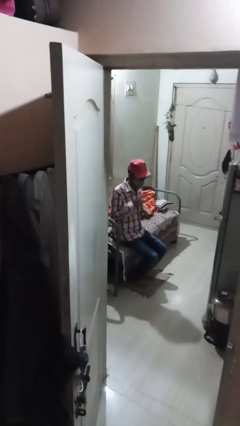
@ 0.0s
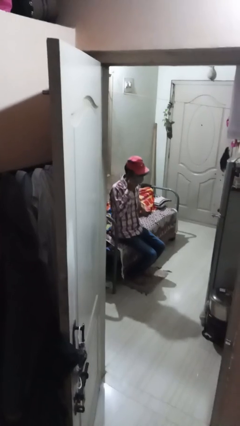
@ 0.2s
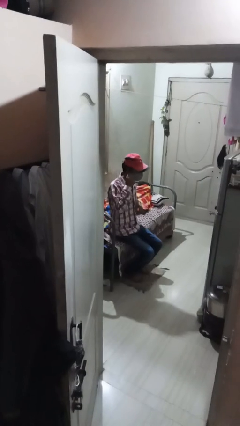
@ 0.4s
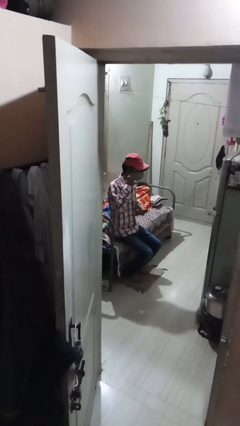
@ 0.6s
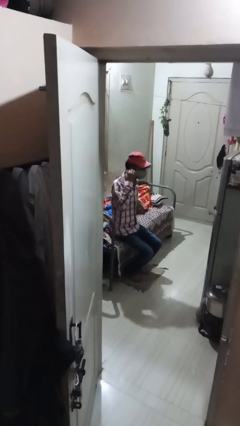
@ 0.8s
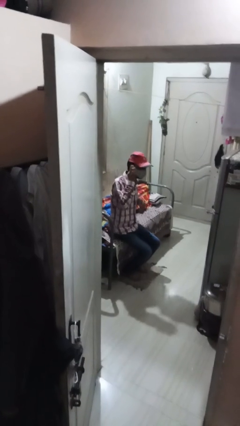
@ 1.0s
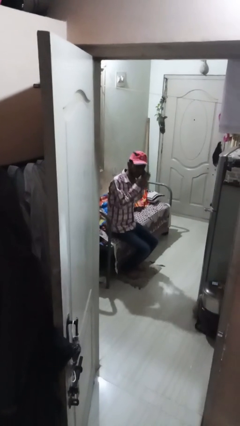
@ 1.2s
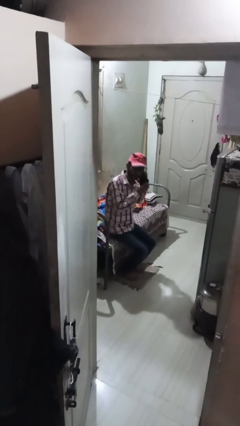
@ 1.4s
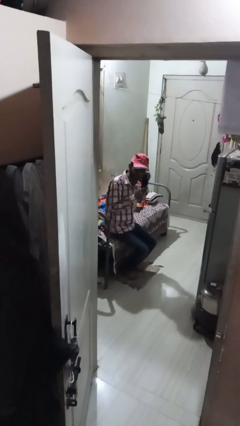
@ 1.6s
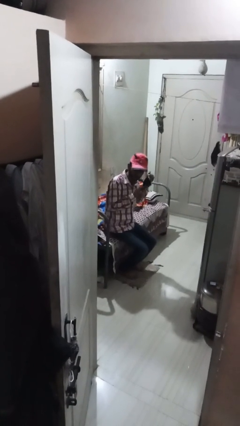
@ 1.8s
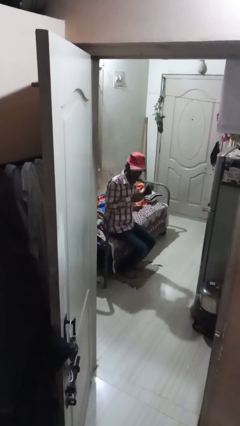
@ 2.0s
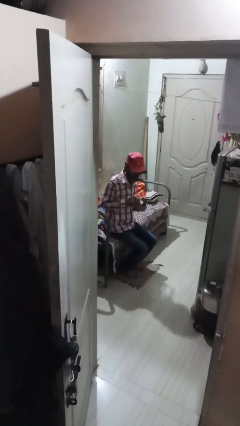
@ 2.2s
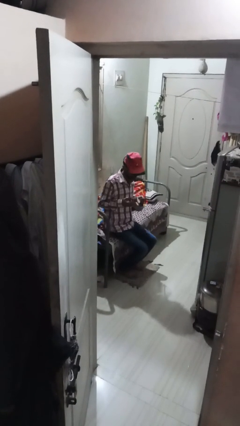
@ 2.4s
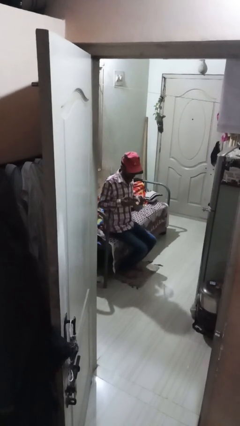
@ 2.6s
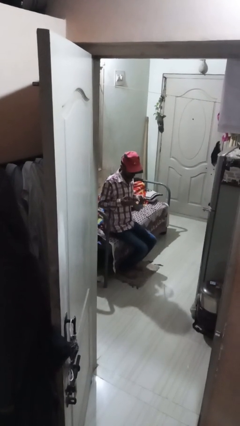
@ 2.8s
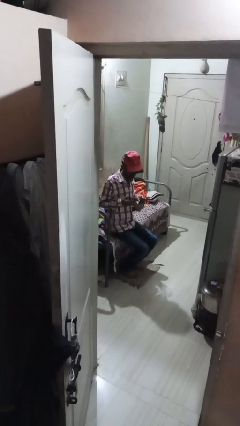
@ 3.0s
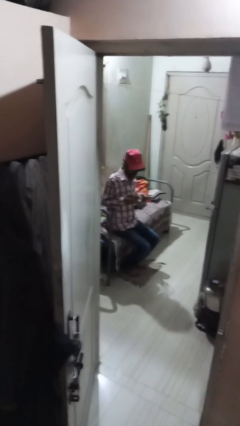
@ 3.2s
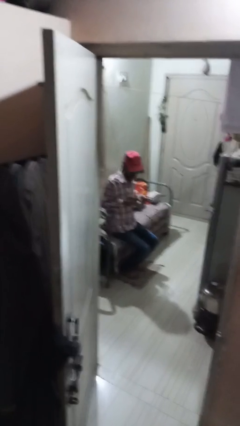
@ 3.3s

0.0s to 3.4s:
person takes off facemask

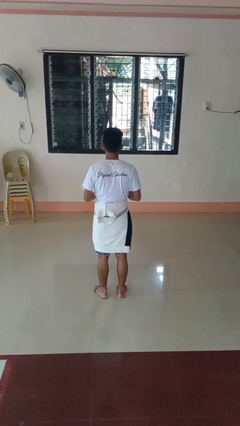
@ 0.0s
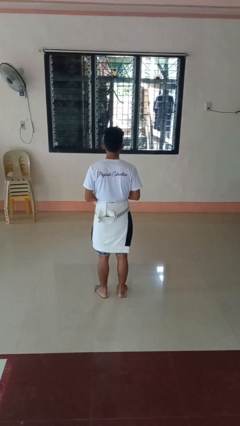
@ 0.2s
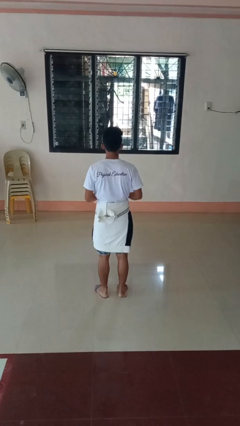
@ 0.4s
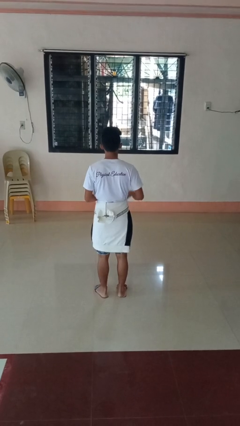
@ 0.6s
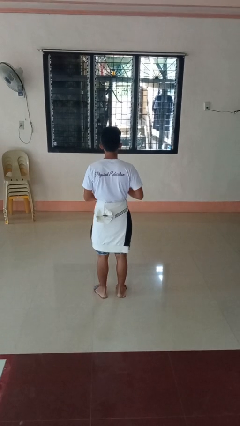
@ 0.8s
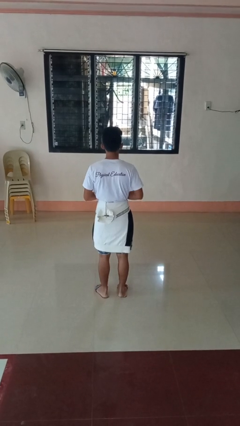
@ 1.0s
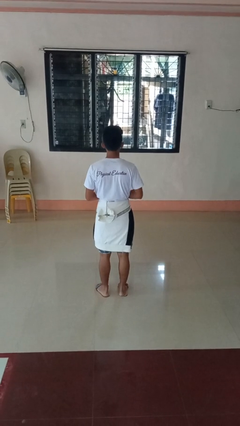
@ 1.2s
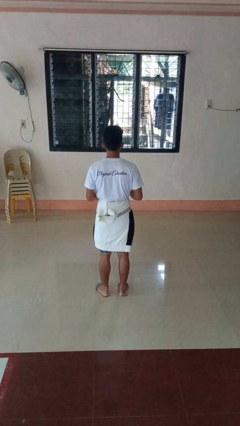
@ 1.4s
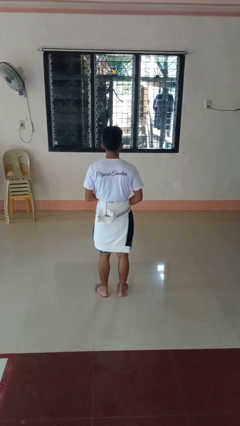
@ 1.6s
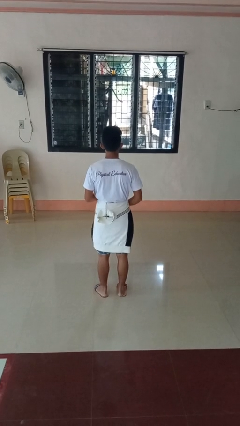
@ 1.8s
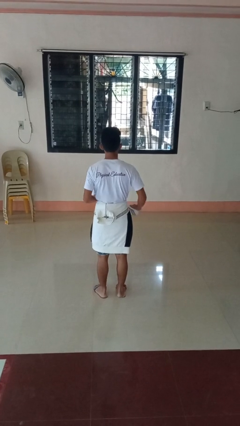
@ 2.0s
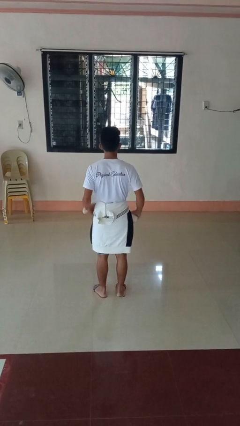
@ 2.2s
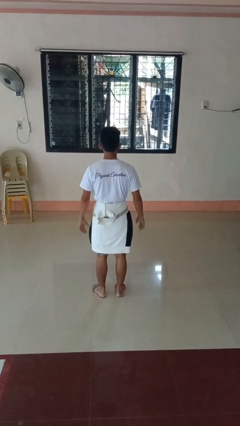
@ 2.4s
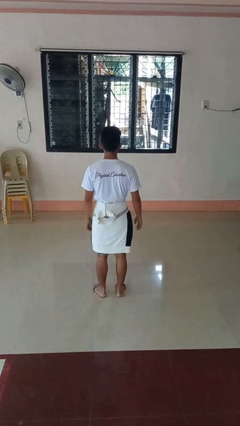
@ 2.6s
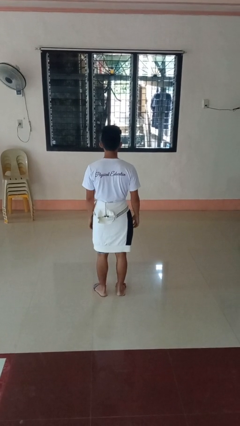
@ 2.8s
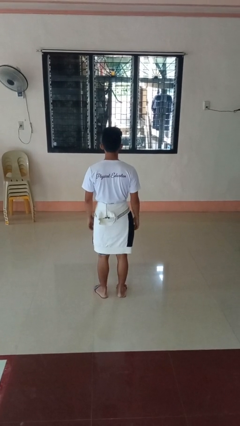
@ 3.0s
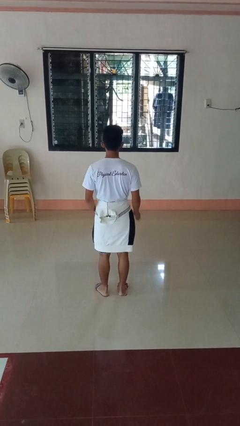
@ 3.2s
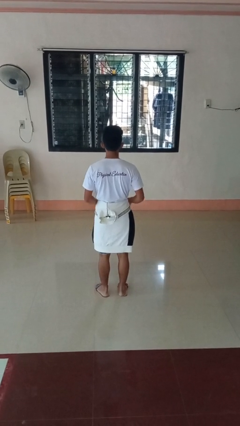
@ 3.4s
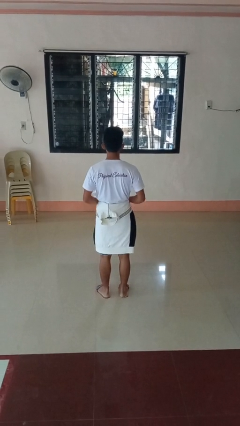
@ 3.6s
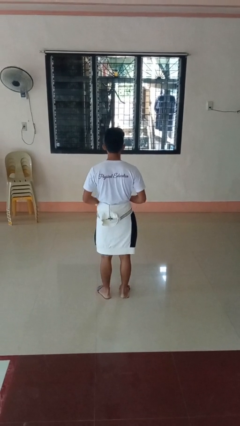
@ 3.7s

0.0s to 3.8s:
person ties jacket around waist

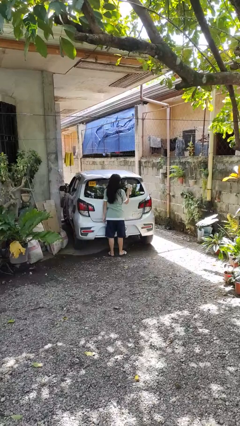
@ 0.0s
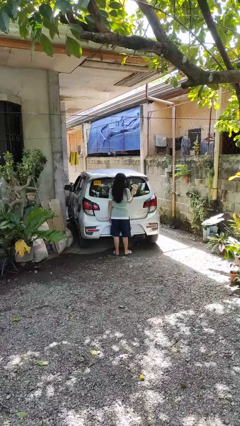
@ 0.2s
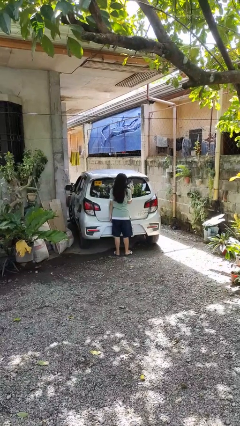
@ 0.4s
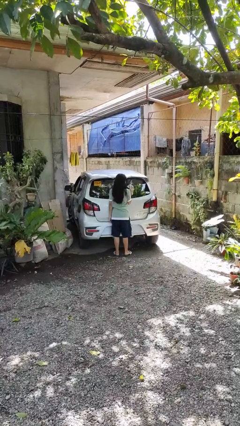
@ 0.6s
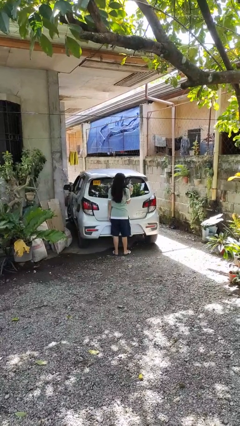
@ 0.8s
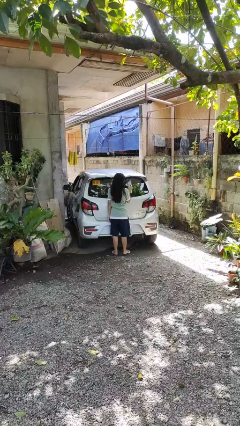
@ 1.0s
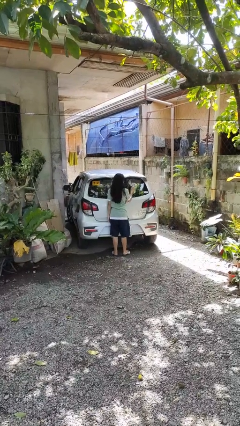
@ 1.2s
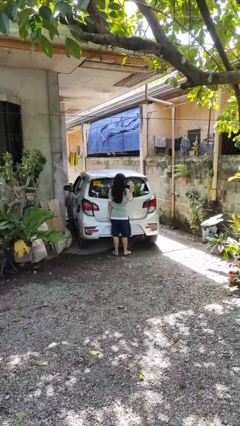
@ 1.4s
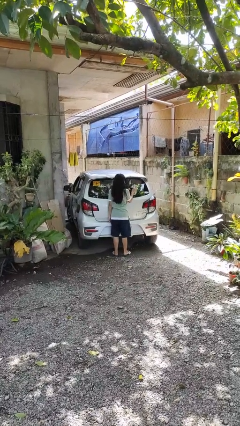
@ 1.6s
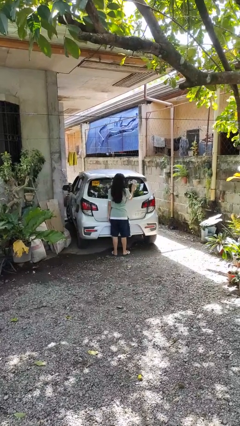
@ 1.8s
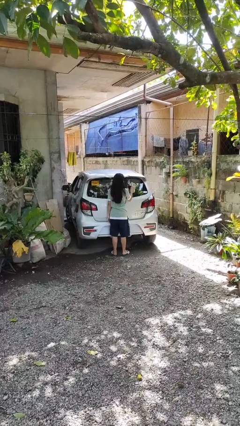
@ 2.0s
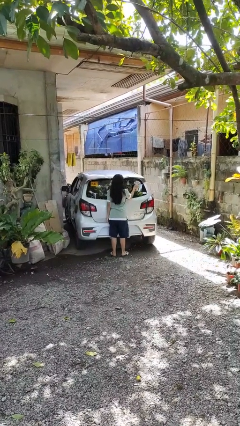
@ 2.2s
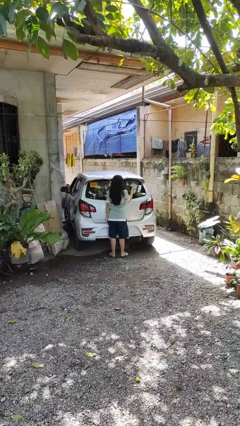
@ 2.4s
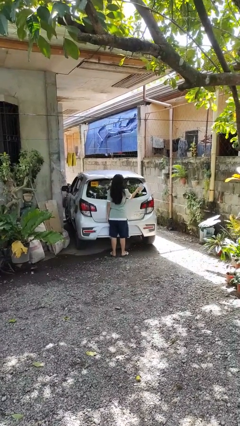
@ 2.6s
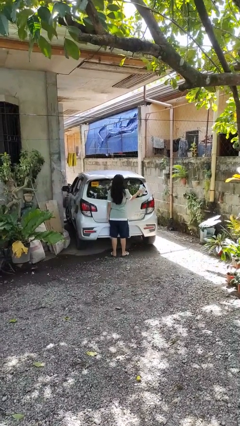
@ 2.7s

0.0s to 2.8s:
person polishes car with rag

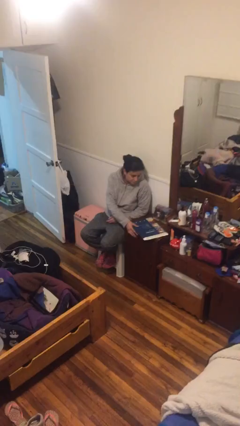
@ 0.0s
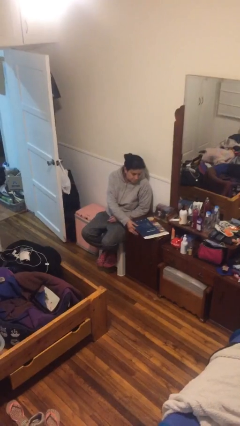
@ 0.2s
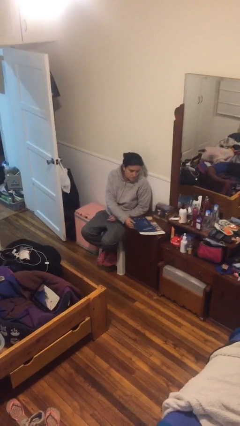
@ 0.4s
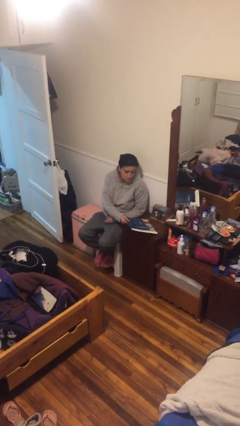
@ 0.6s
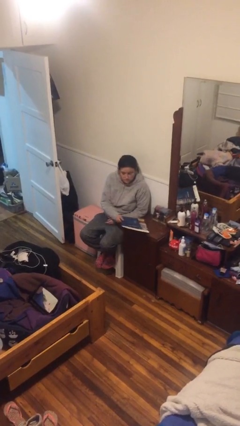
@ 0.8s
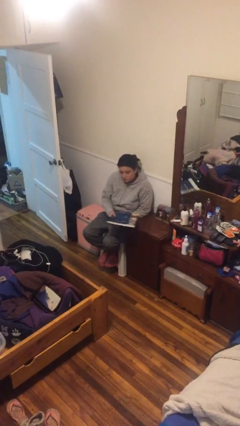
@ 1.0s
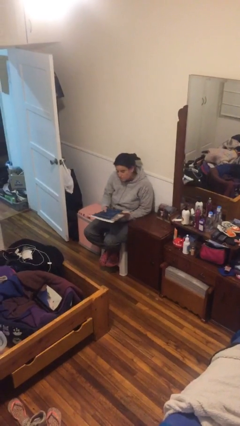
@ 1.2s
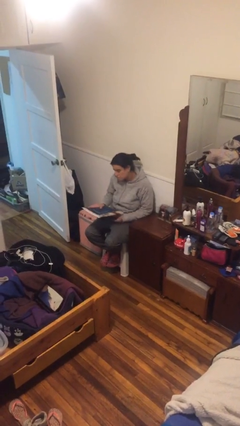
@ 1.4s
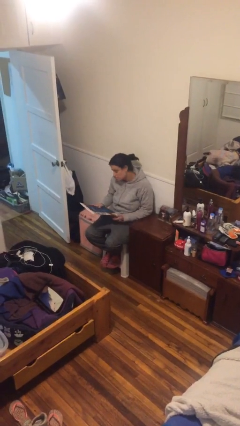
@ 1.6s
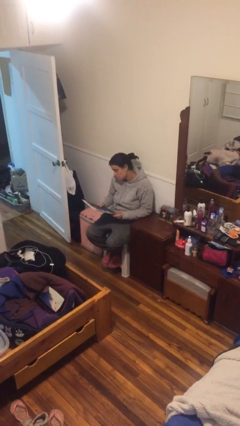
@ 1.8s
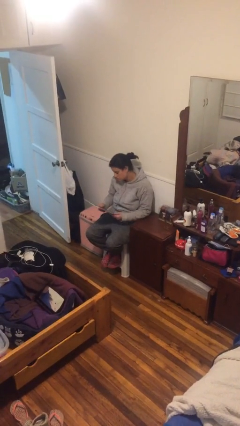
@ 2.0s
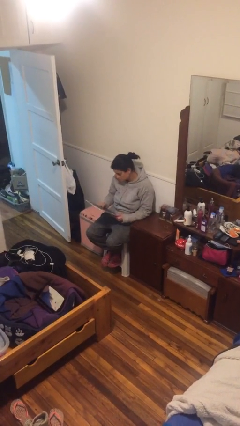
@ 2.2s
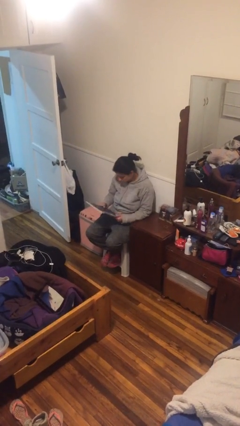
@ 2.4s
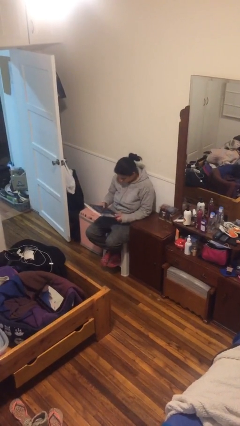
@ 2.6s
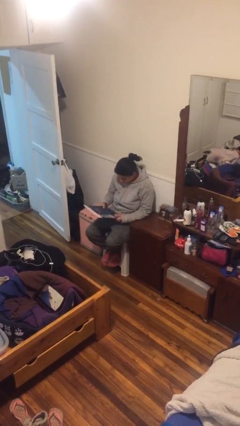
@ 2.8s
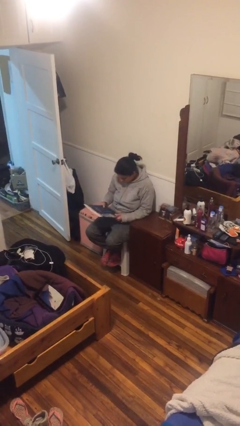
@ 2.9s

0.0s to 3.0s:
person picks up object from table

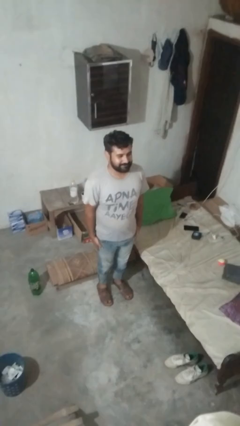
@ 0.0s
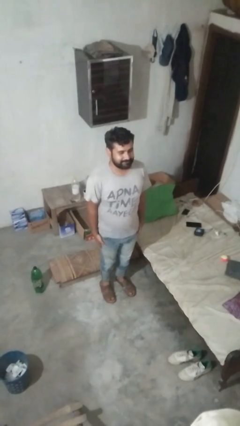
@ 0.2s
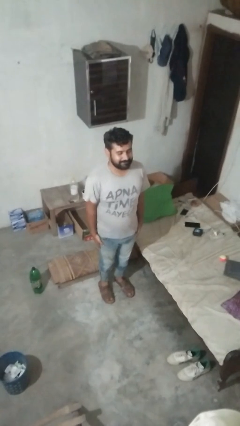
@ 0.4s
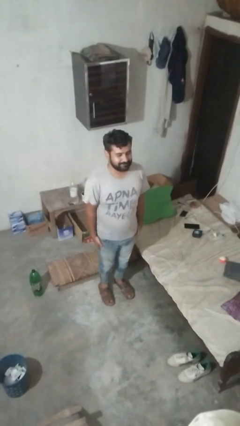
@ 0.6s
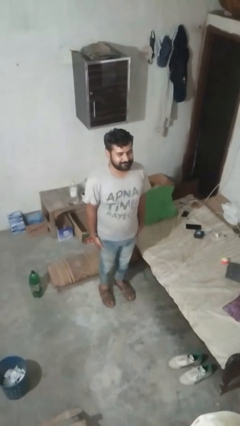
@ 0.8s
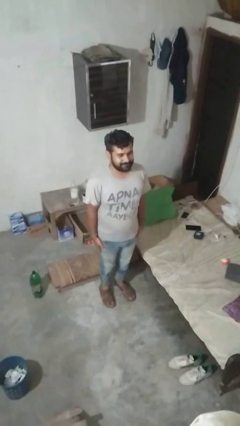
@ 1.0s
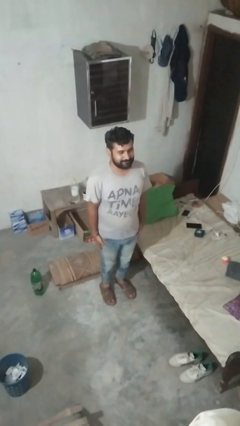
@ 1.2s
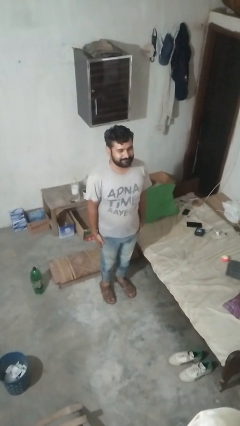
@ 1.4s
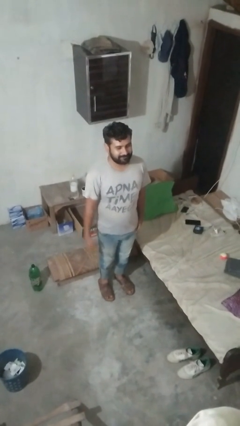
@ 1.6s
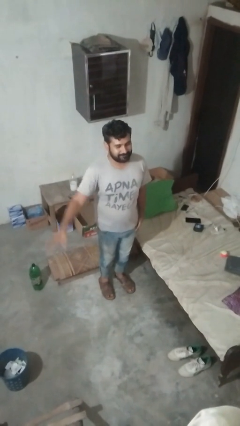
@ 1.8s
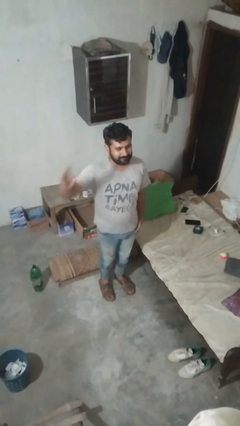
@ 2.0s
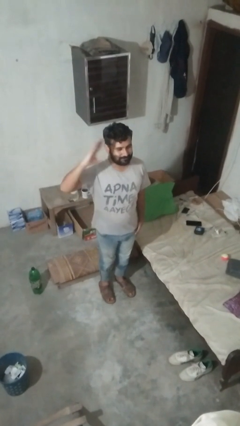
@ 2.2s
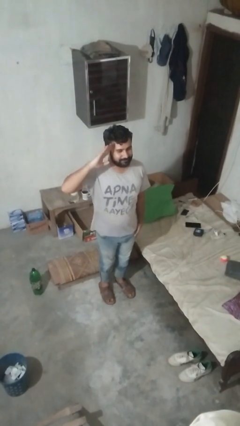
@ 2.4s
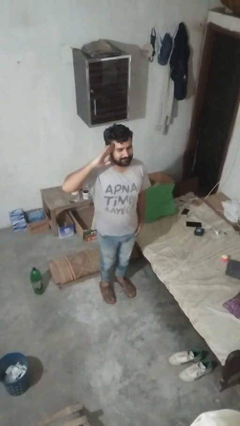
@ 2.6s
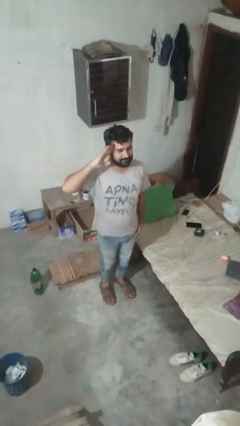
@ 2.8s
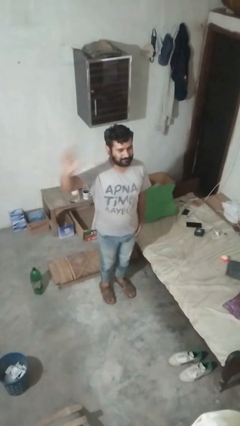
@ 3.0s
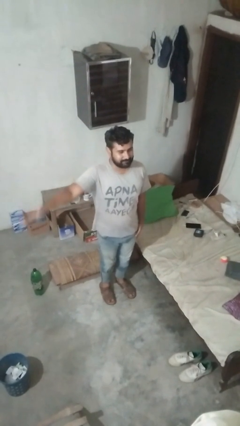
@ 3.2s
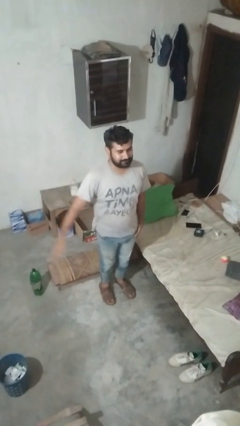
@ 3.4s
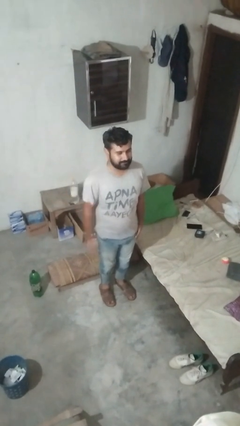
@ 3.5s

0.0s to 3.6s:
person salutes

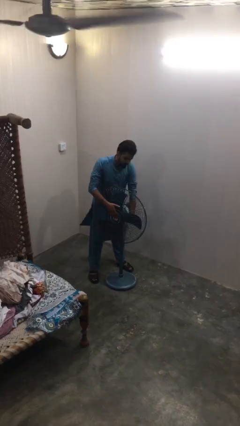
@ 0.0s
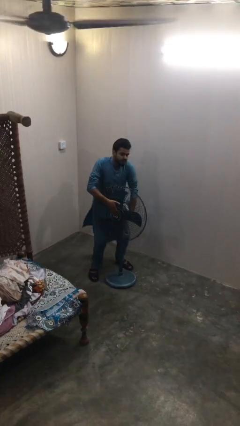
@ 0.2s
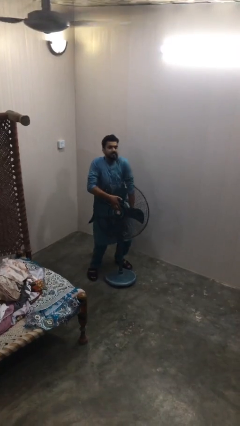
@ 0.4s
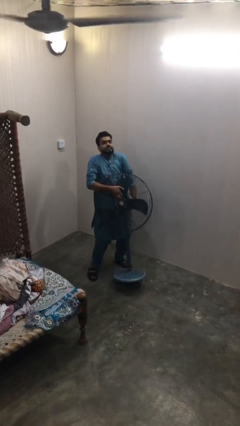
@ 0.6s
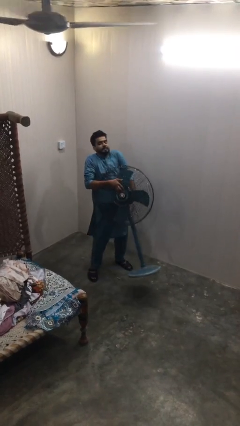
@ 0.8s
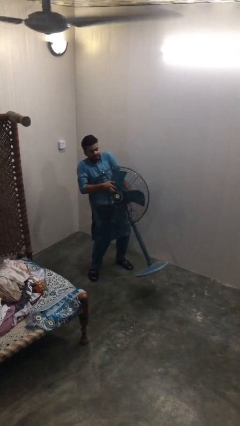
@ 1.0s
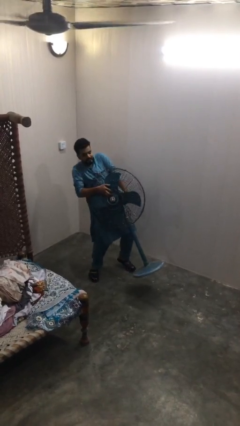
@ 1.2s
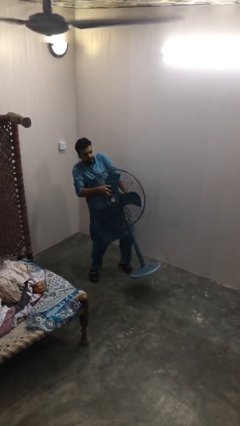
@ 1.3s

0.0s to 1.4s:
person picks up object from floor
